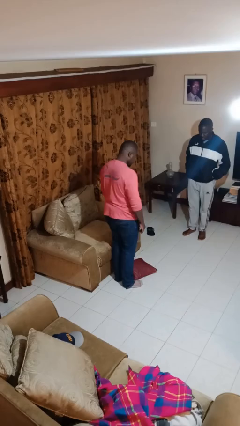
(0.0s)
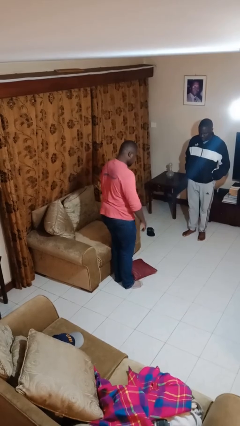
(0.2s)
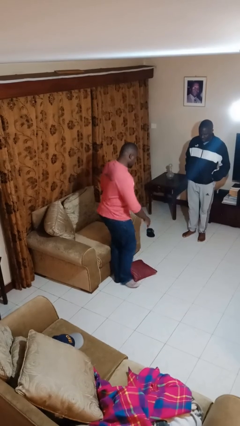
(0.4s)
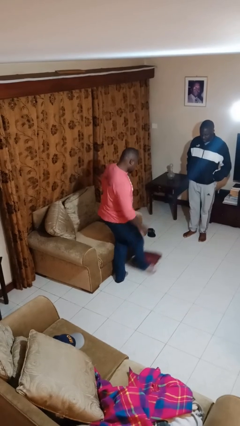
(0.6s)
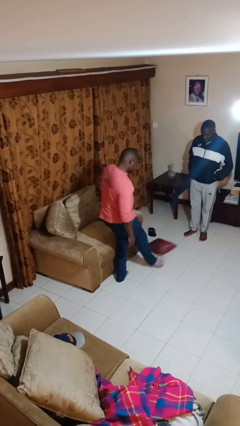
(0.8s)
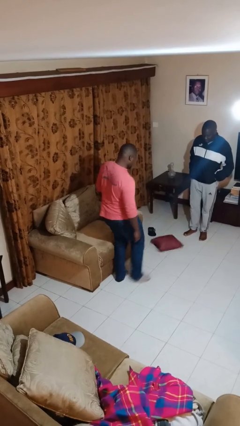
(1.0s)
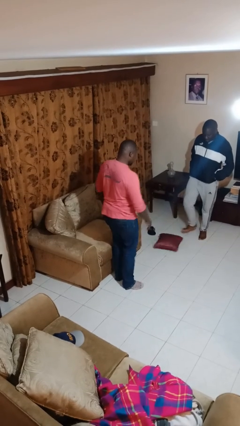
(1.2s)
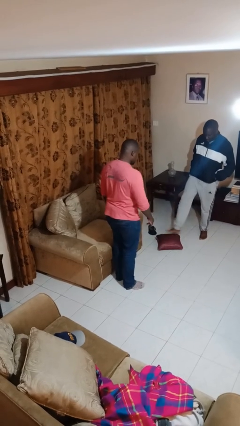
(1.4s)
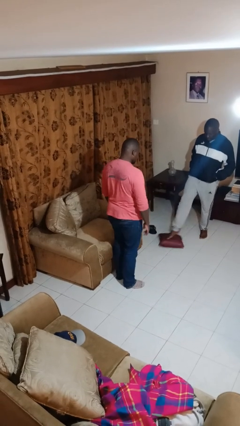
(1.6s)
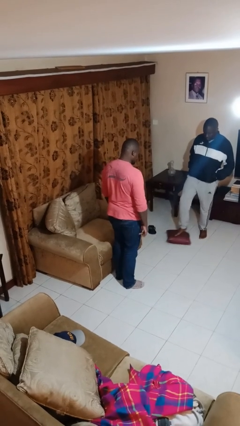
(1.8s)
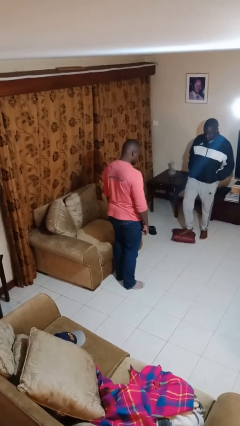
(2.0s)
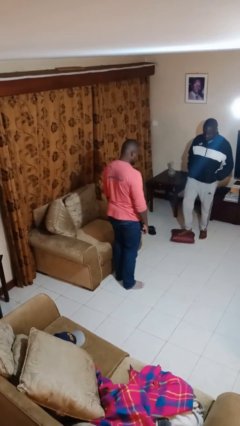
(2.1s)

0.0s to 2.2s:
person kicks object to person

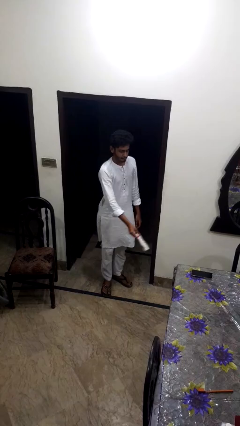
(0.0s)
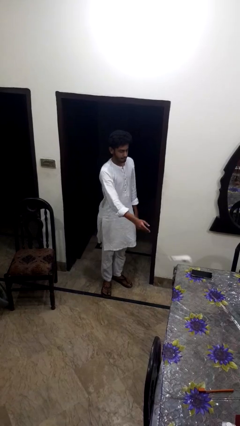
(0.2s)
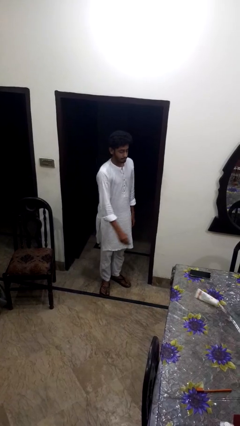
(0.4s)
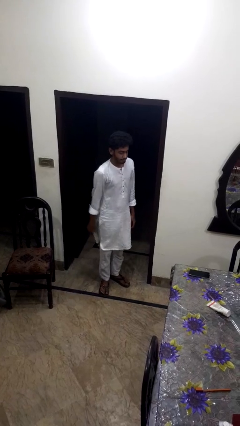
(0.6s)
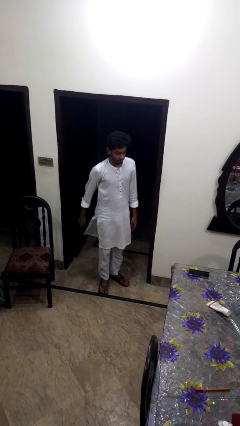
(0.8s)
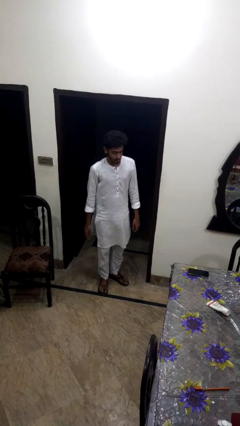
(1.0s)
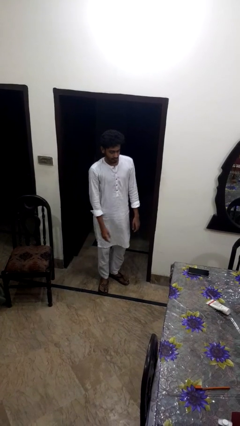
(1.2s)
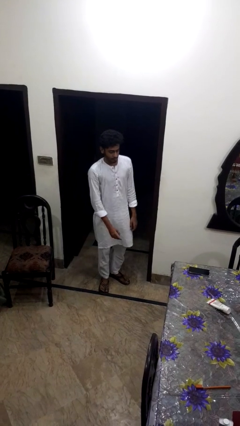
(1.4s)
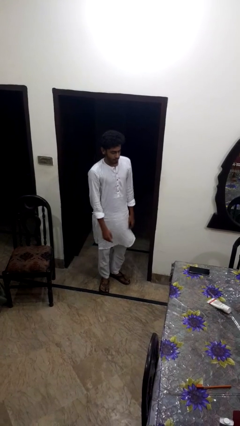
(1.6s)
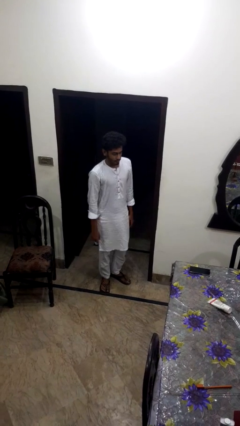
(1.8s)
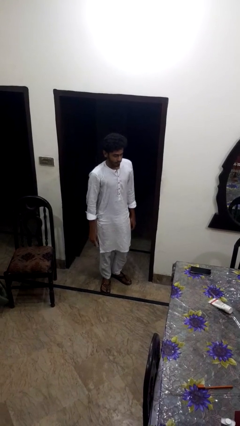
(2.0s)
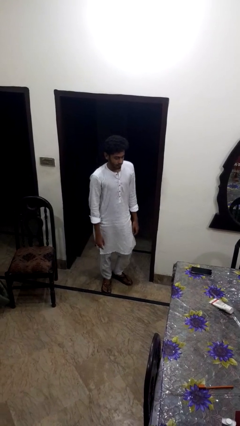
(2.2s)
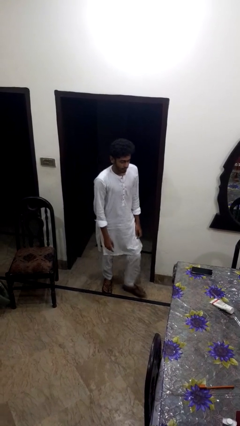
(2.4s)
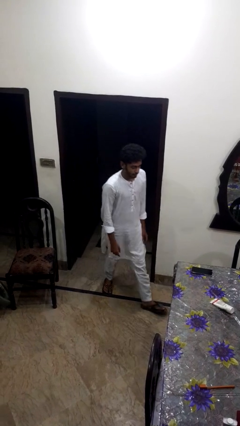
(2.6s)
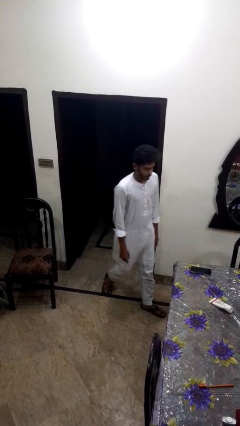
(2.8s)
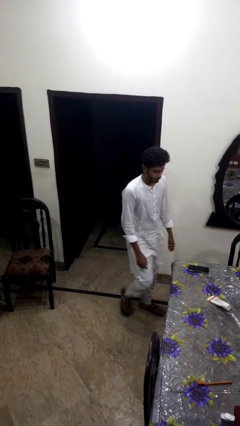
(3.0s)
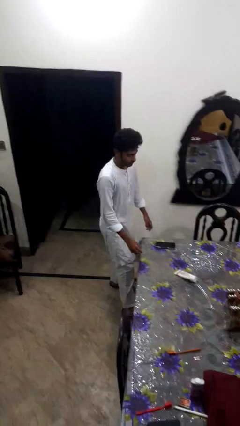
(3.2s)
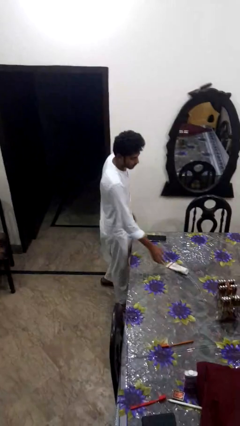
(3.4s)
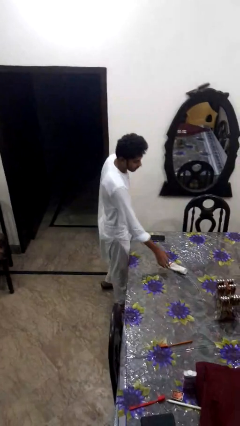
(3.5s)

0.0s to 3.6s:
person throws object on table

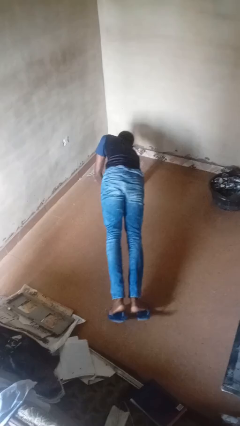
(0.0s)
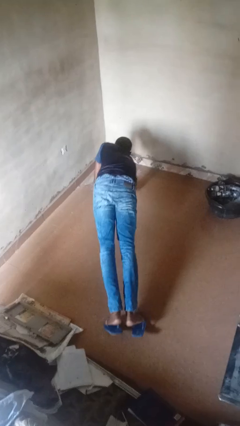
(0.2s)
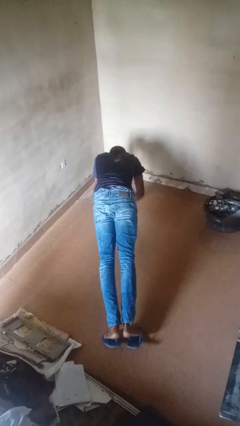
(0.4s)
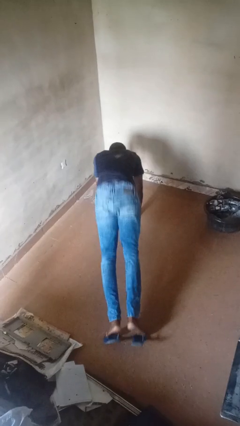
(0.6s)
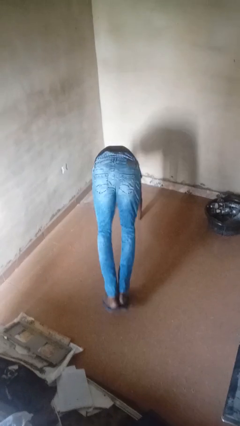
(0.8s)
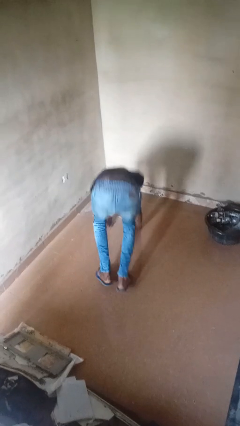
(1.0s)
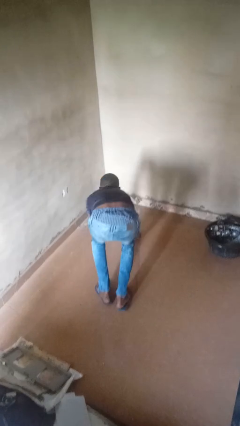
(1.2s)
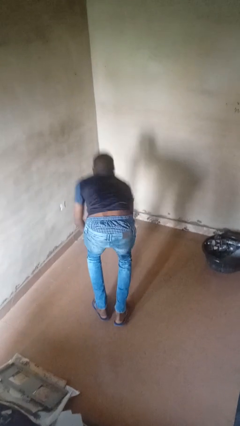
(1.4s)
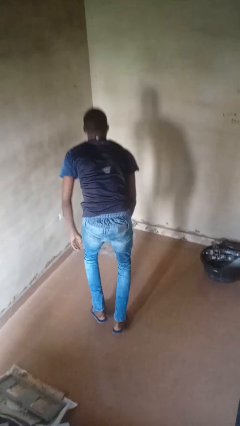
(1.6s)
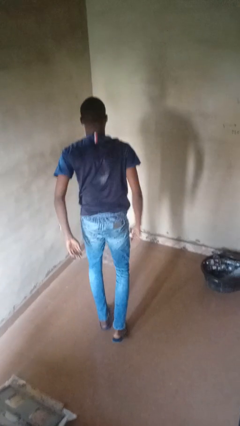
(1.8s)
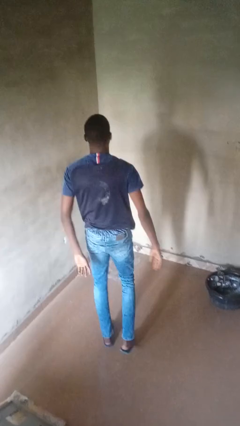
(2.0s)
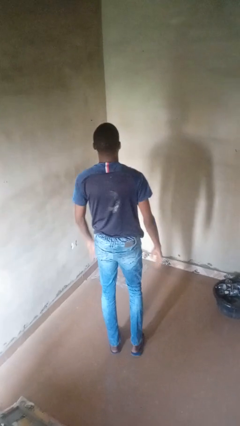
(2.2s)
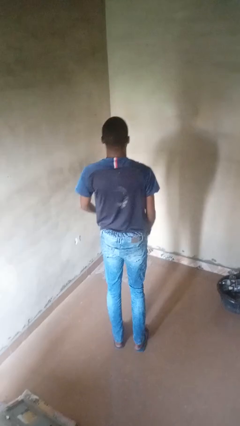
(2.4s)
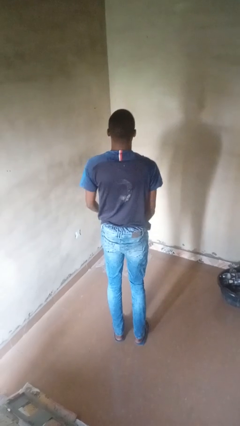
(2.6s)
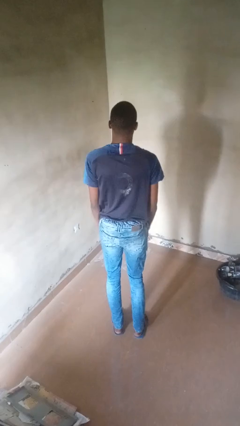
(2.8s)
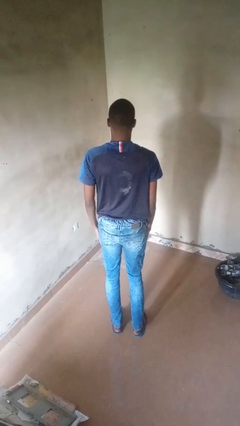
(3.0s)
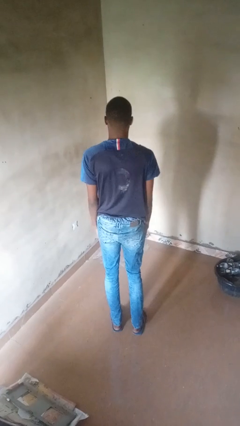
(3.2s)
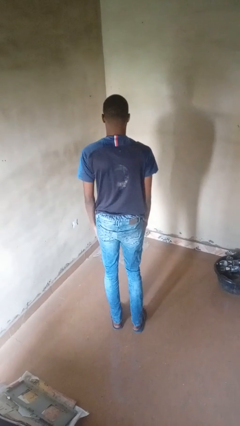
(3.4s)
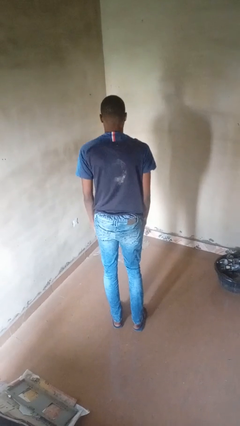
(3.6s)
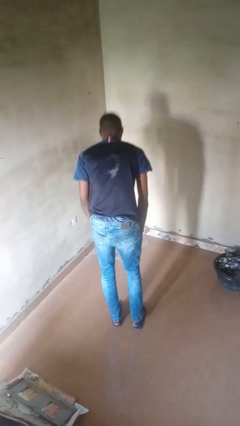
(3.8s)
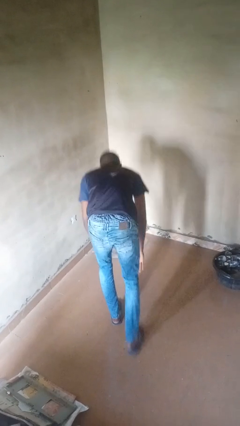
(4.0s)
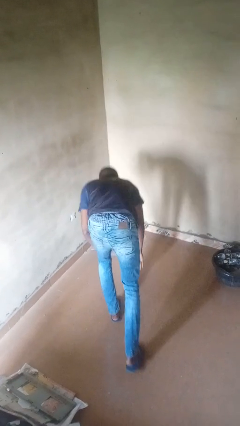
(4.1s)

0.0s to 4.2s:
person stands up from floor

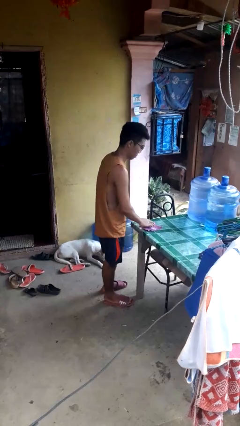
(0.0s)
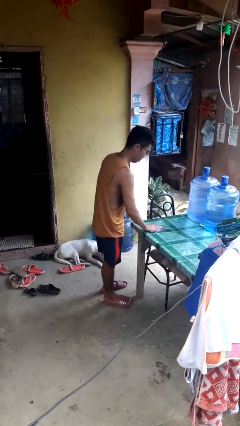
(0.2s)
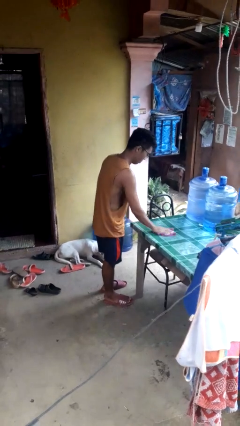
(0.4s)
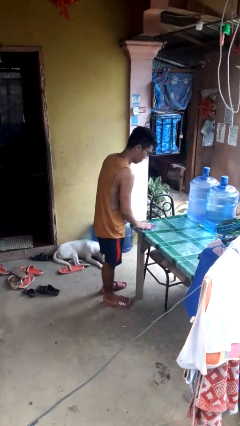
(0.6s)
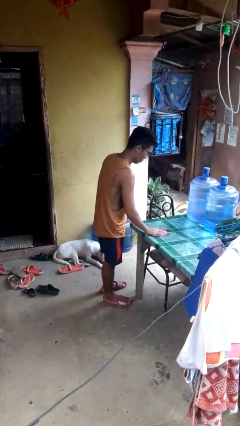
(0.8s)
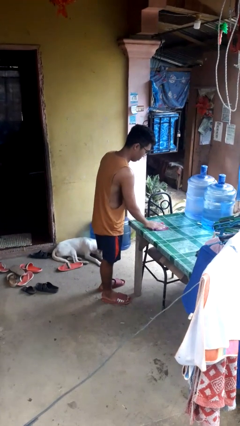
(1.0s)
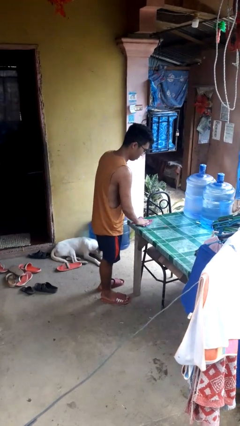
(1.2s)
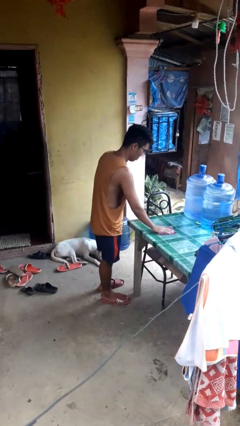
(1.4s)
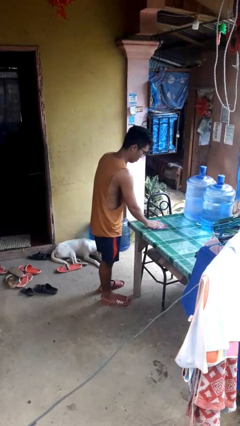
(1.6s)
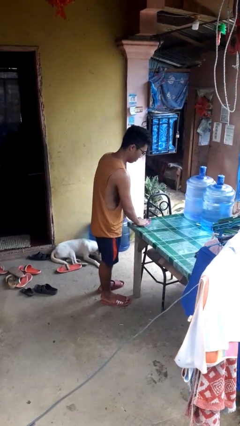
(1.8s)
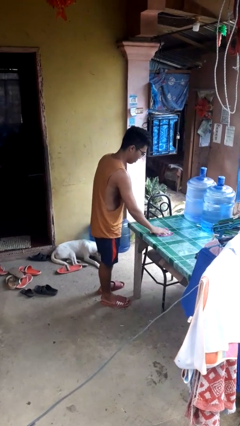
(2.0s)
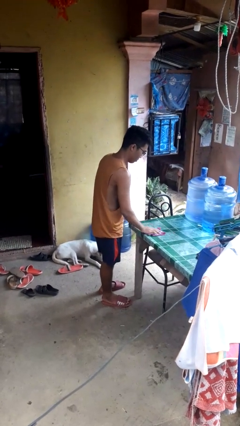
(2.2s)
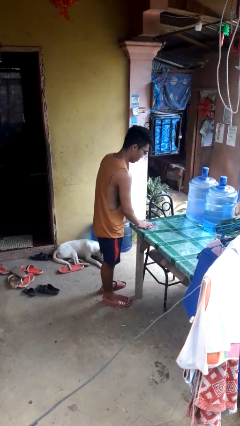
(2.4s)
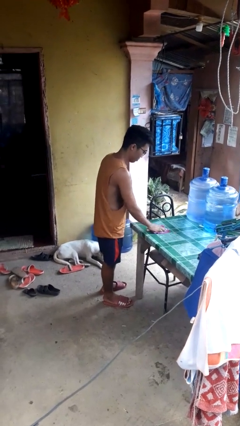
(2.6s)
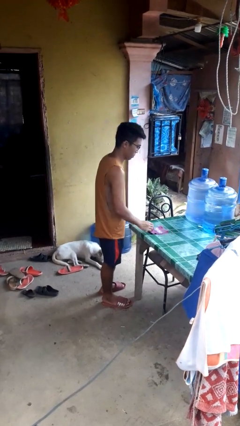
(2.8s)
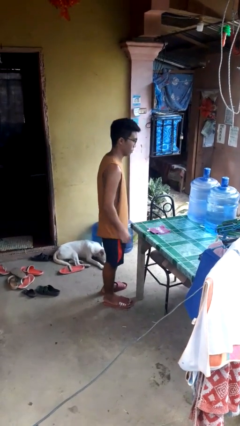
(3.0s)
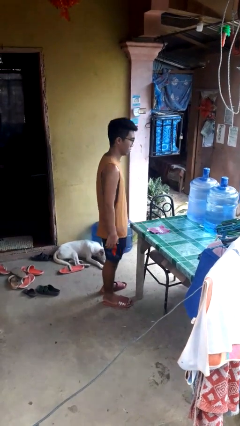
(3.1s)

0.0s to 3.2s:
person cleans table with rag

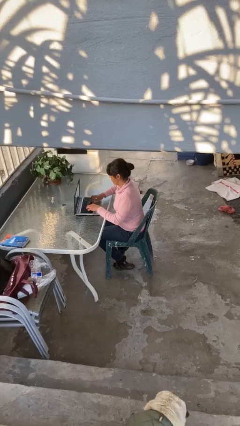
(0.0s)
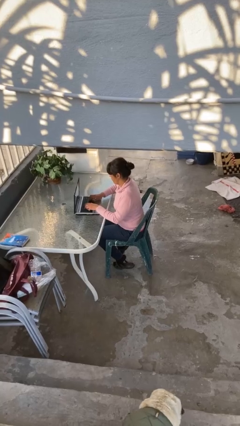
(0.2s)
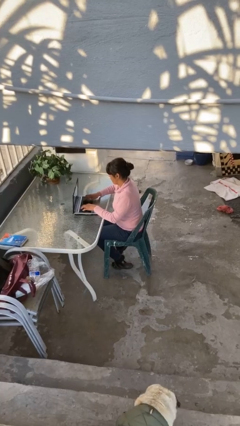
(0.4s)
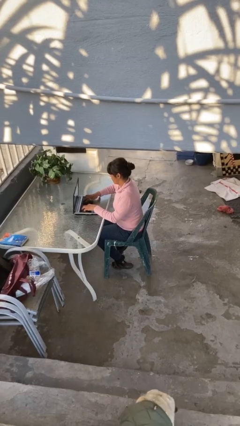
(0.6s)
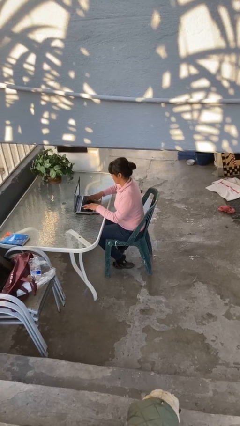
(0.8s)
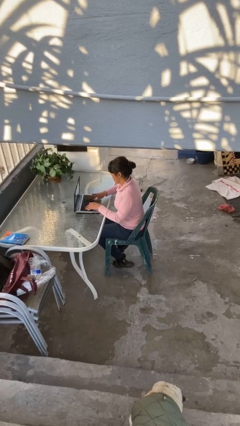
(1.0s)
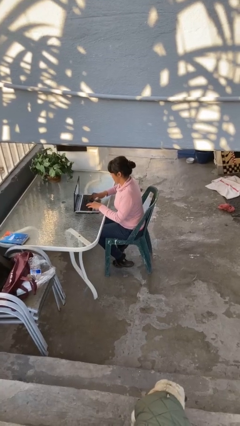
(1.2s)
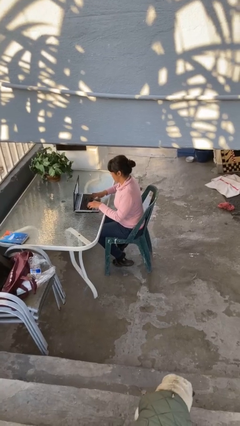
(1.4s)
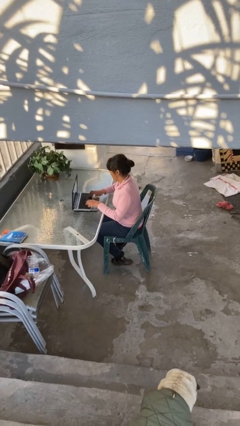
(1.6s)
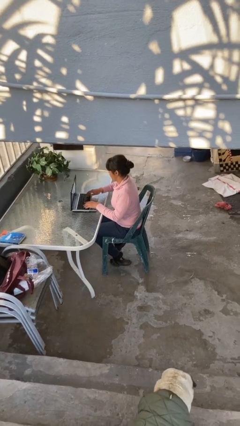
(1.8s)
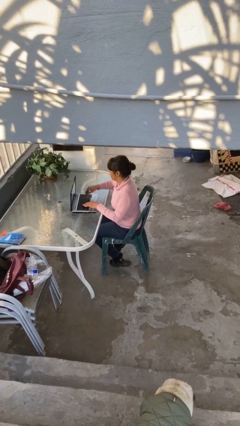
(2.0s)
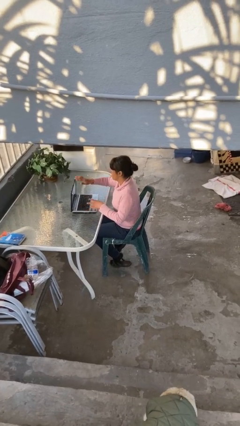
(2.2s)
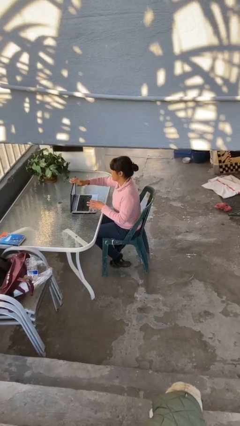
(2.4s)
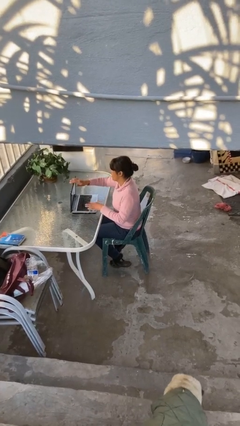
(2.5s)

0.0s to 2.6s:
person interacts with laptop

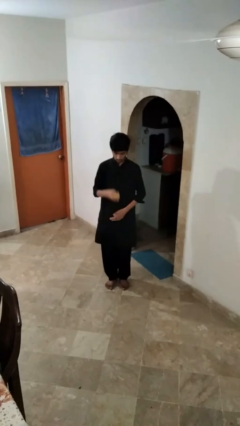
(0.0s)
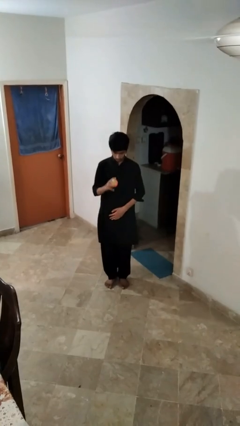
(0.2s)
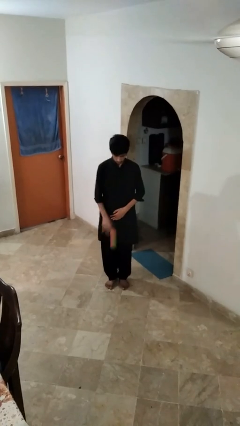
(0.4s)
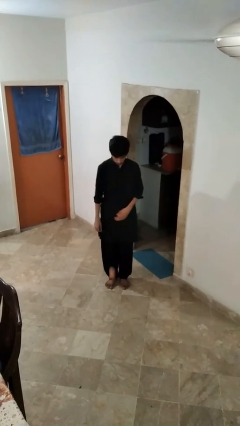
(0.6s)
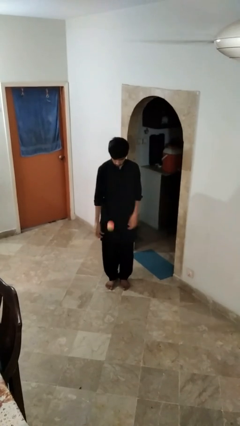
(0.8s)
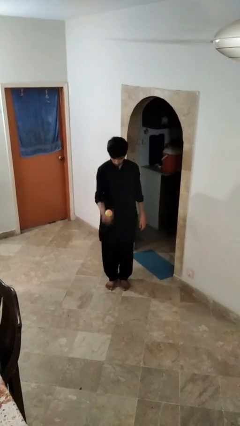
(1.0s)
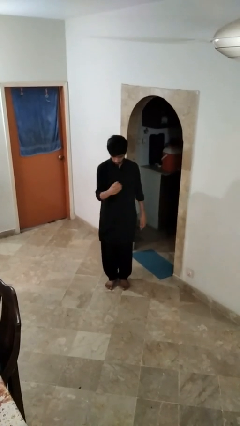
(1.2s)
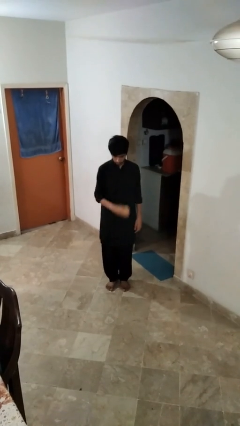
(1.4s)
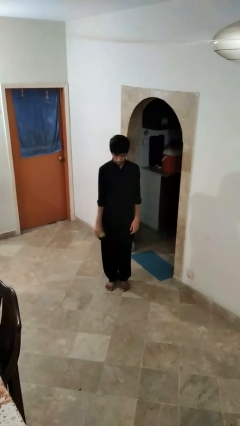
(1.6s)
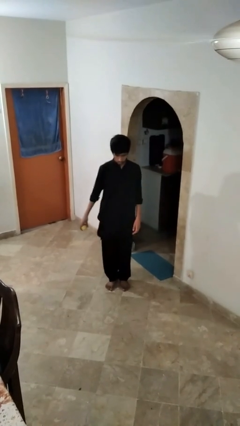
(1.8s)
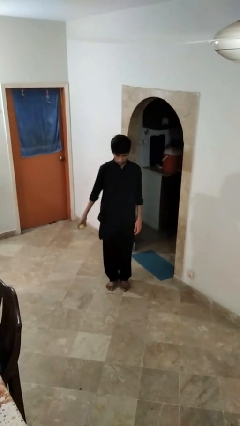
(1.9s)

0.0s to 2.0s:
person bounces ball on floor
